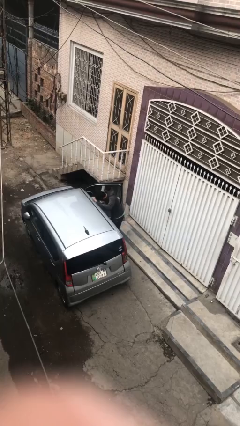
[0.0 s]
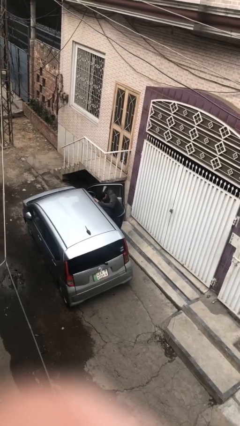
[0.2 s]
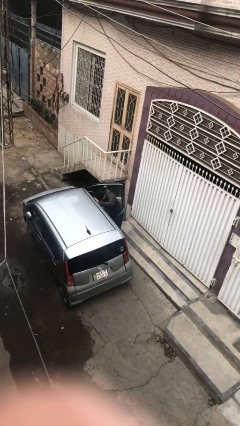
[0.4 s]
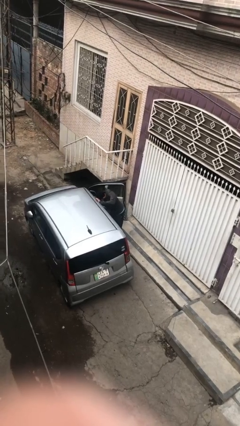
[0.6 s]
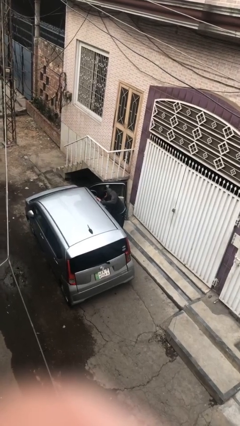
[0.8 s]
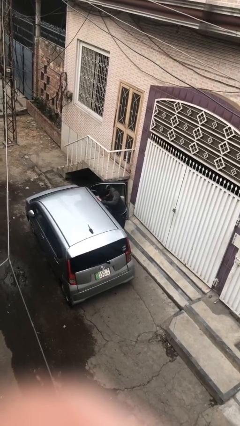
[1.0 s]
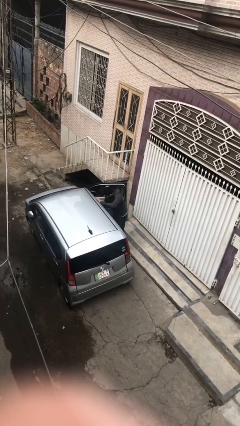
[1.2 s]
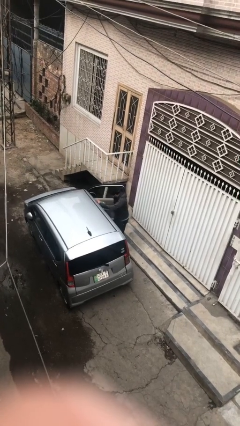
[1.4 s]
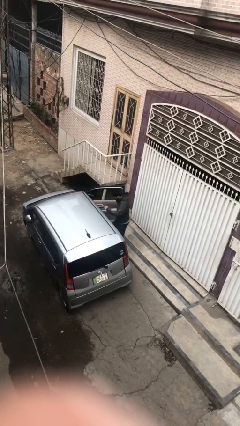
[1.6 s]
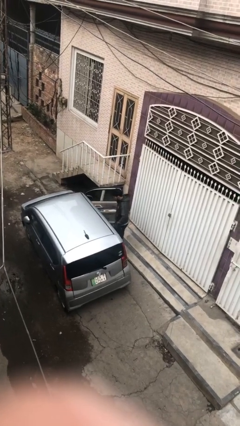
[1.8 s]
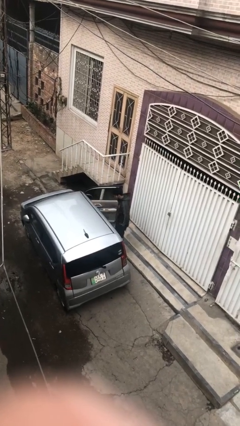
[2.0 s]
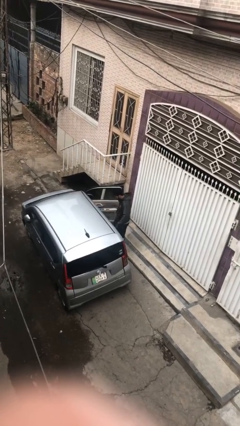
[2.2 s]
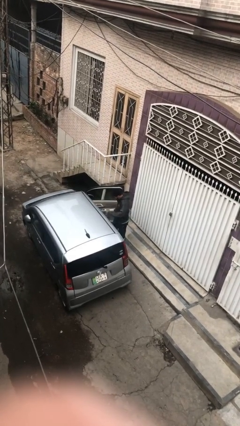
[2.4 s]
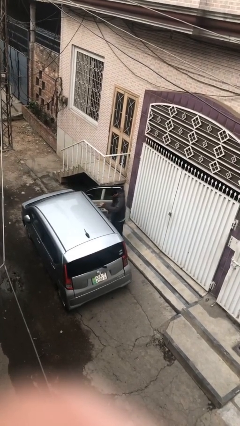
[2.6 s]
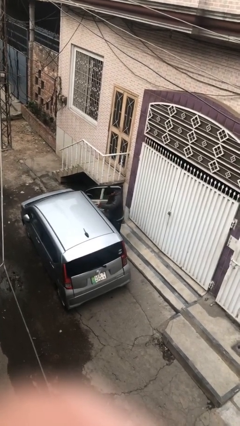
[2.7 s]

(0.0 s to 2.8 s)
person loads car

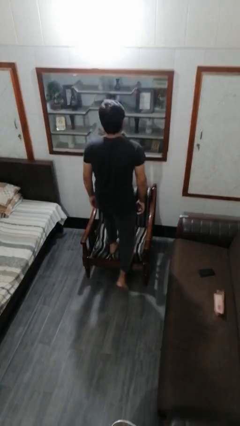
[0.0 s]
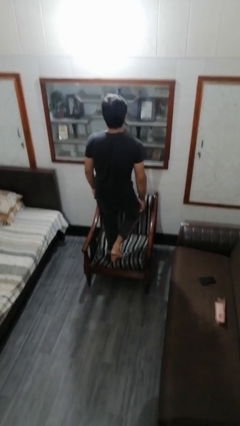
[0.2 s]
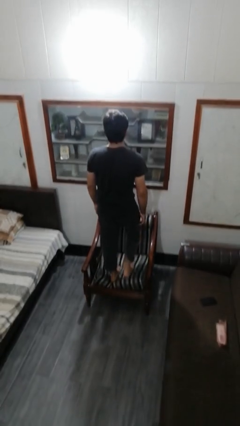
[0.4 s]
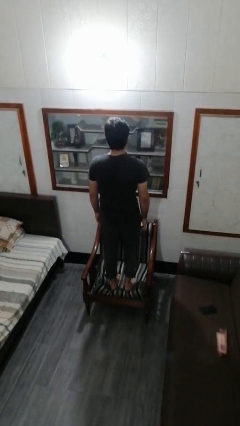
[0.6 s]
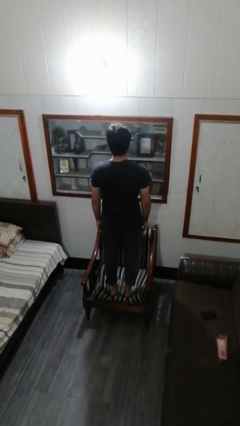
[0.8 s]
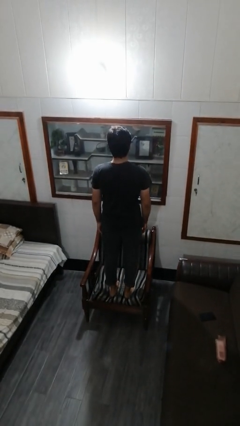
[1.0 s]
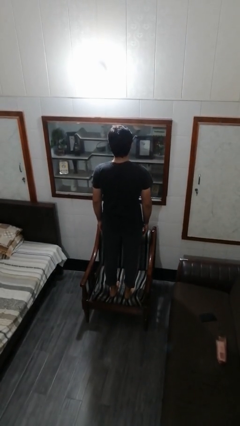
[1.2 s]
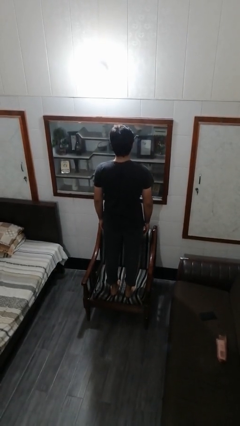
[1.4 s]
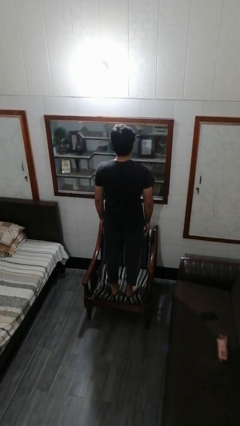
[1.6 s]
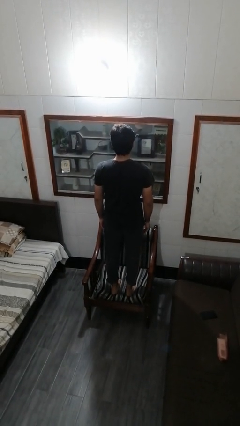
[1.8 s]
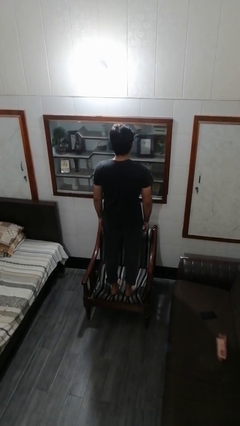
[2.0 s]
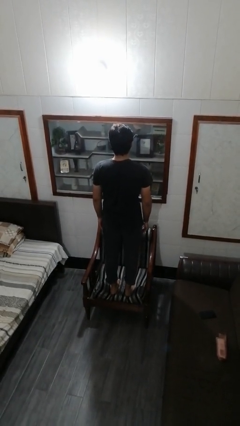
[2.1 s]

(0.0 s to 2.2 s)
person climbs on chair

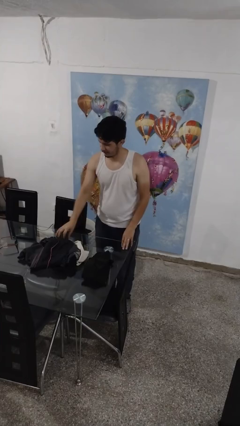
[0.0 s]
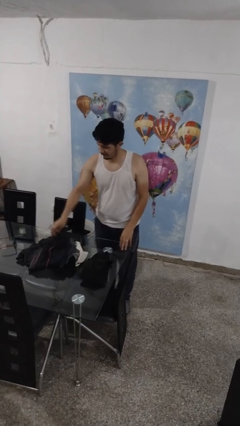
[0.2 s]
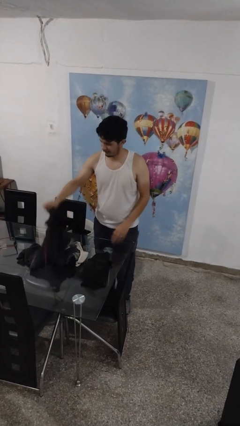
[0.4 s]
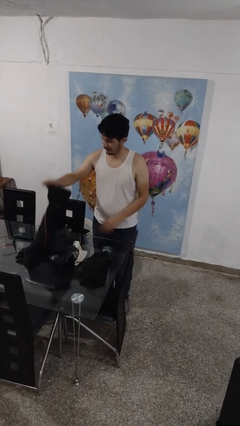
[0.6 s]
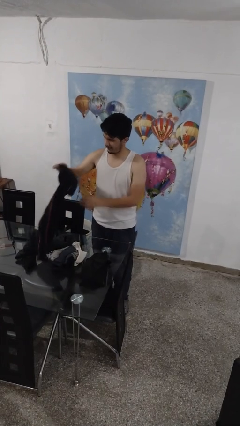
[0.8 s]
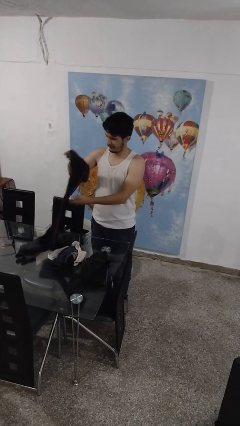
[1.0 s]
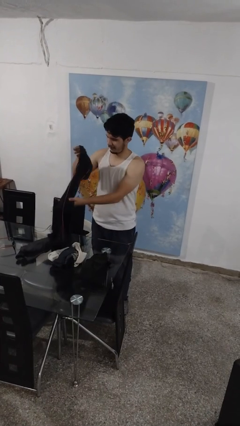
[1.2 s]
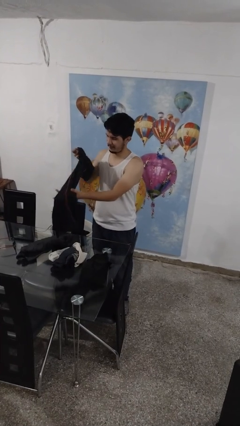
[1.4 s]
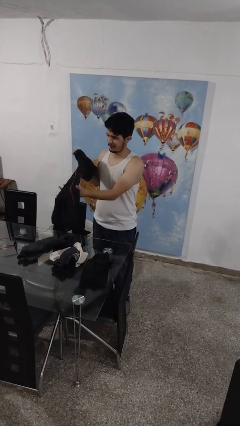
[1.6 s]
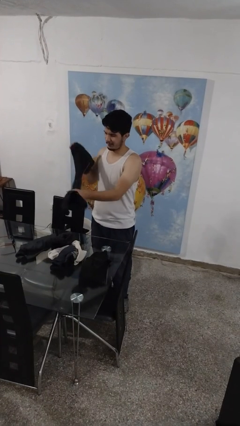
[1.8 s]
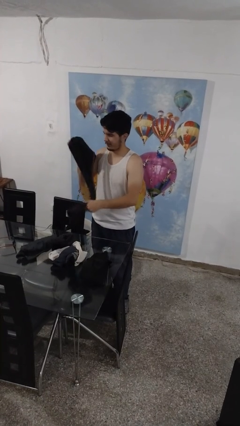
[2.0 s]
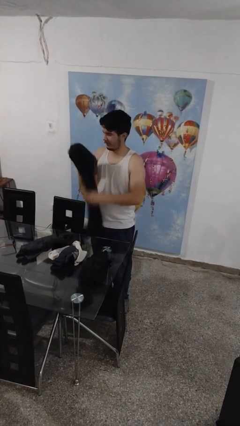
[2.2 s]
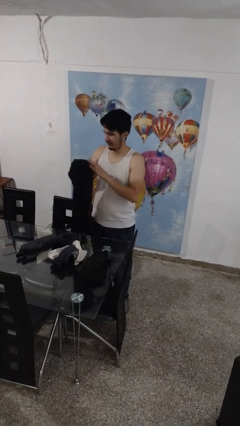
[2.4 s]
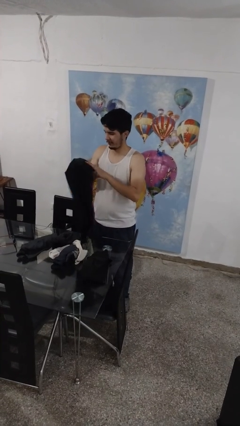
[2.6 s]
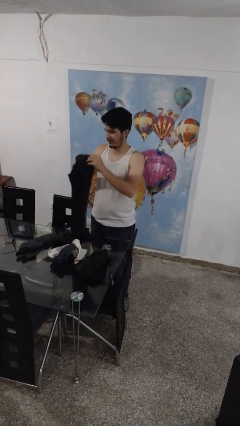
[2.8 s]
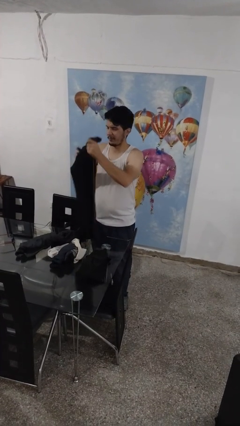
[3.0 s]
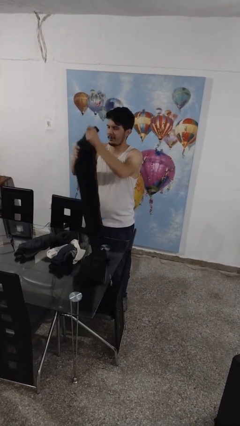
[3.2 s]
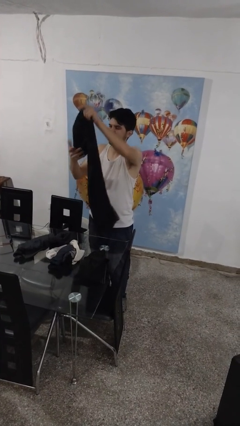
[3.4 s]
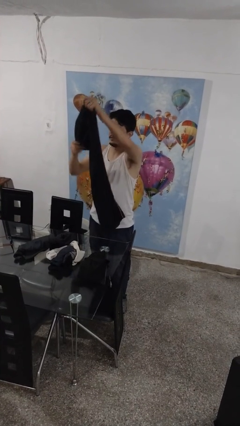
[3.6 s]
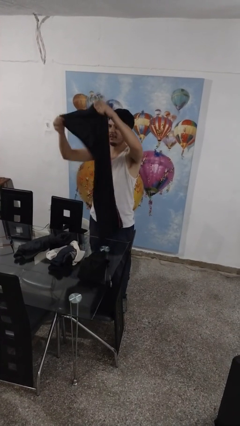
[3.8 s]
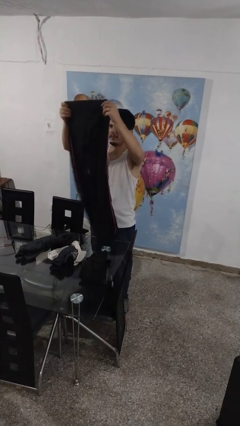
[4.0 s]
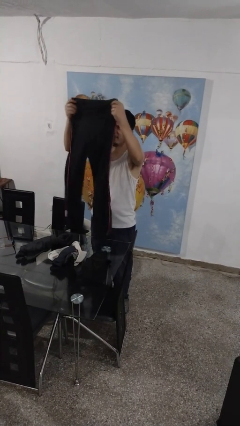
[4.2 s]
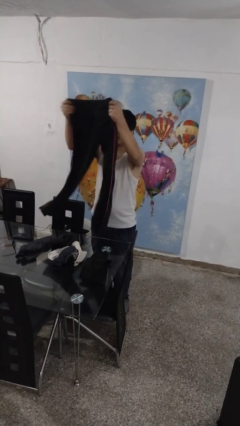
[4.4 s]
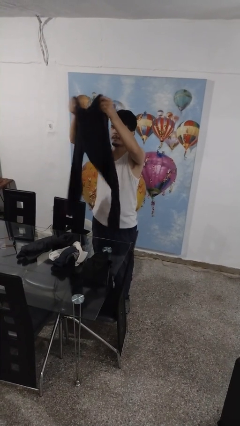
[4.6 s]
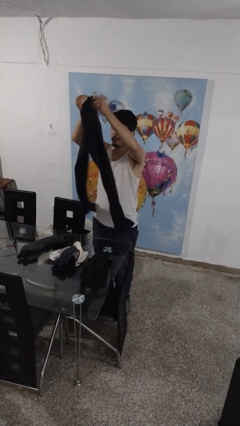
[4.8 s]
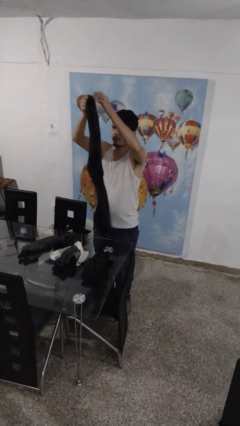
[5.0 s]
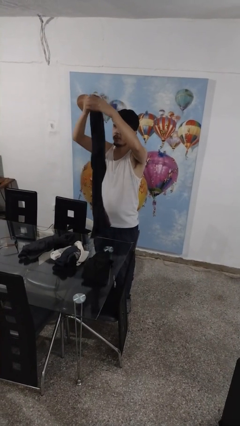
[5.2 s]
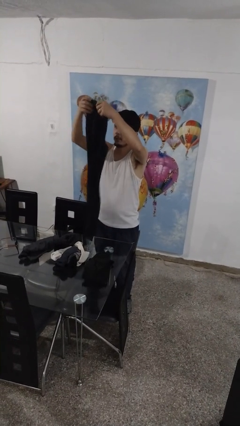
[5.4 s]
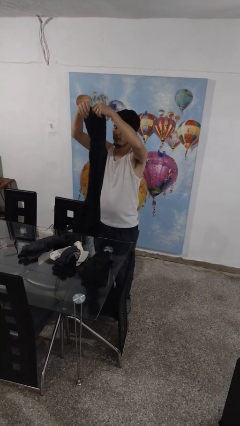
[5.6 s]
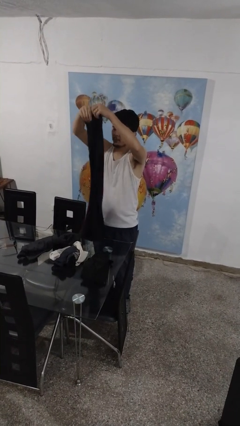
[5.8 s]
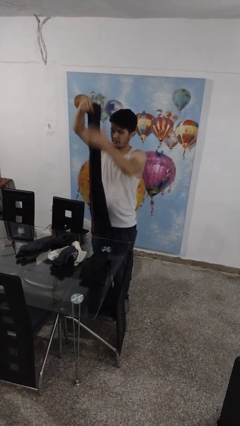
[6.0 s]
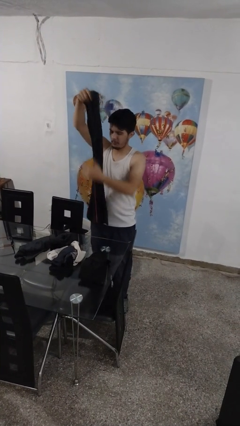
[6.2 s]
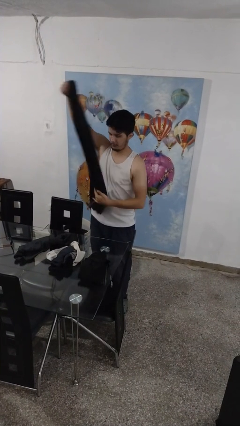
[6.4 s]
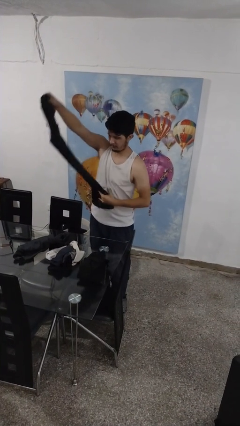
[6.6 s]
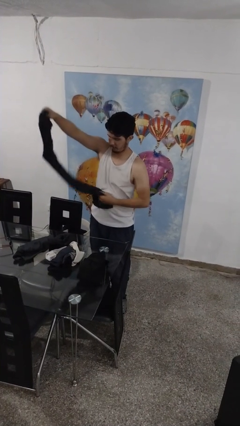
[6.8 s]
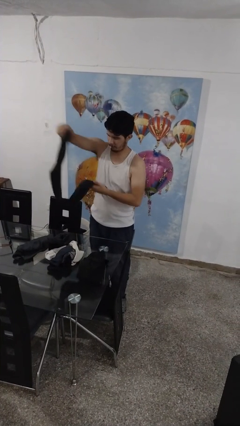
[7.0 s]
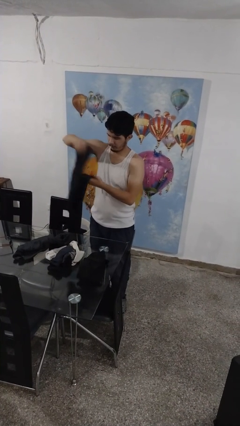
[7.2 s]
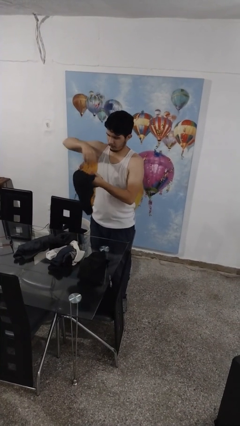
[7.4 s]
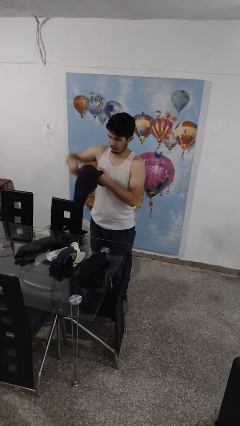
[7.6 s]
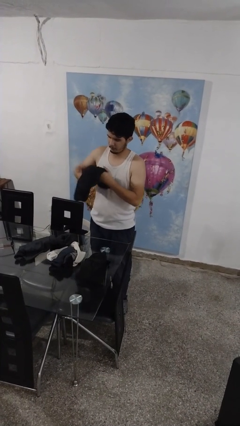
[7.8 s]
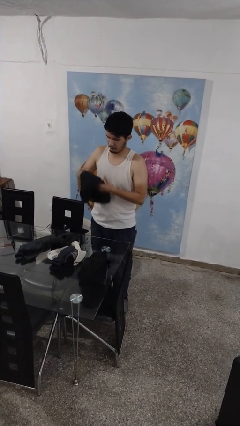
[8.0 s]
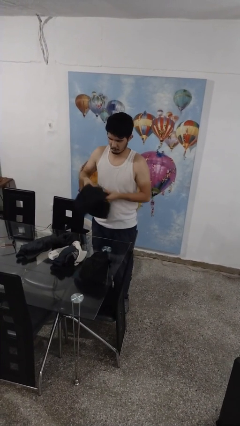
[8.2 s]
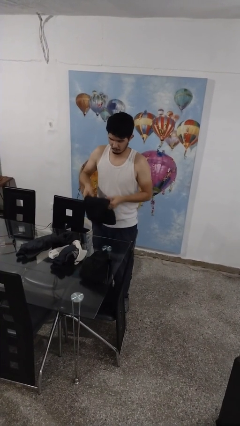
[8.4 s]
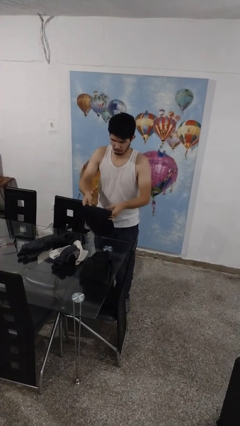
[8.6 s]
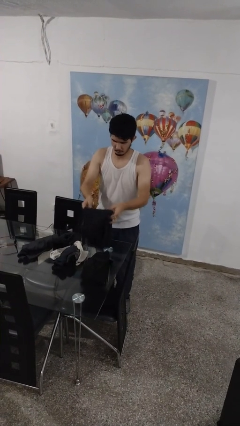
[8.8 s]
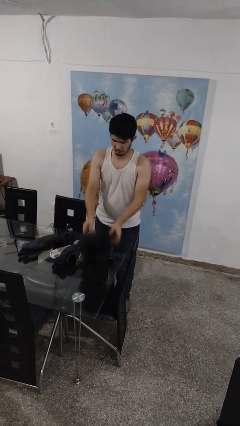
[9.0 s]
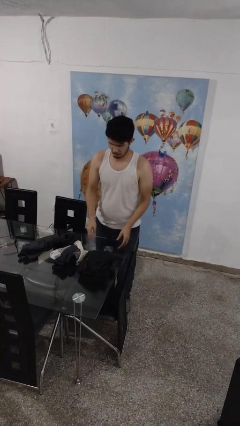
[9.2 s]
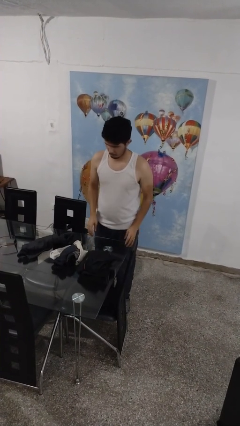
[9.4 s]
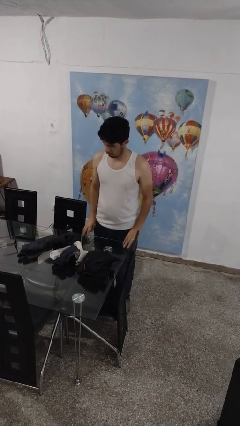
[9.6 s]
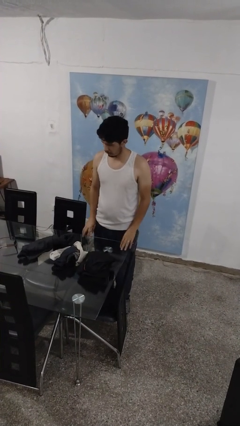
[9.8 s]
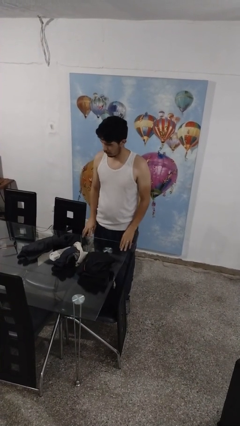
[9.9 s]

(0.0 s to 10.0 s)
person folds pants

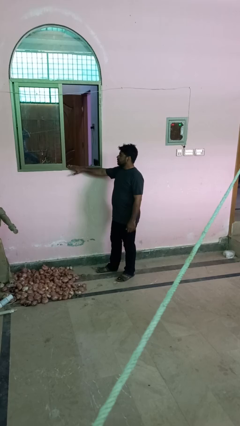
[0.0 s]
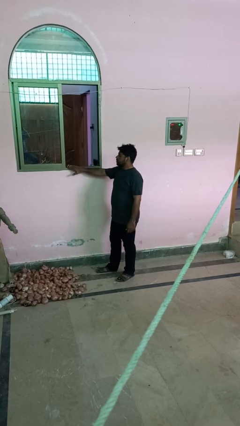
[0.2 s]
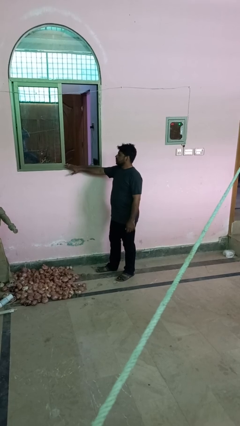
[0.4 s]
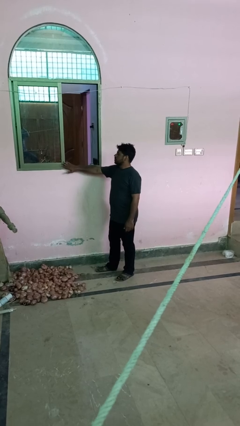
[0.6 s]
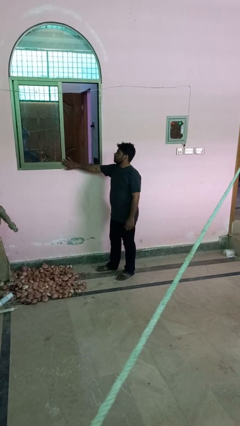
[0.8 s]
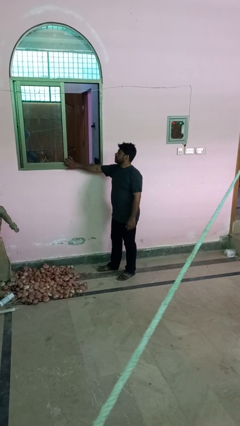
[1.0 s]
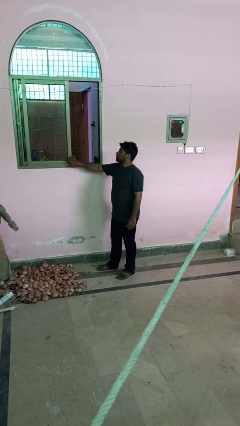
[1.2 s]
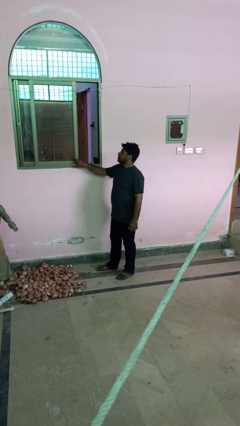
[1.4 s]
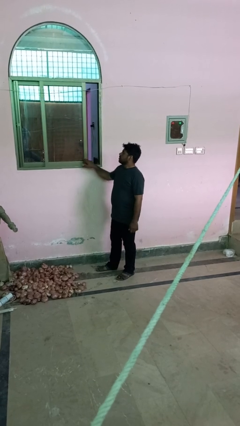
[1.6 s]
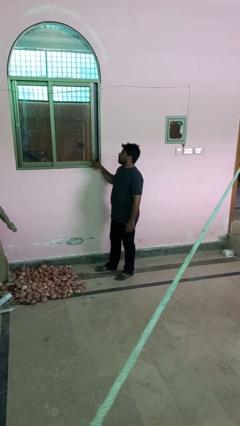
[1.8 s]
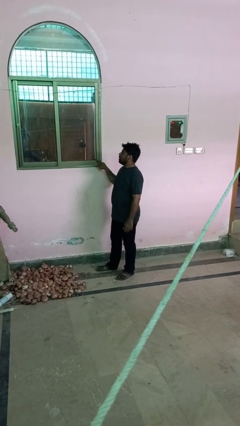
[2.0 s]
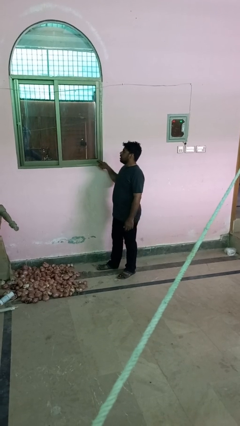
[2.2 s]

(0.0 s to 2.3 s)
person closes sliding door
